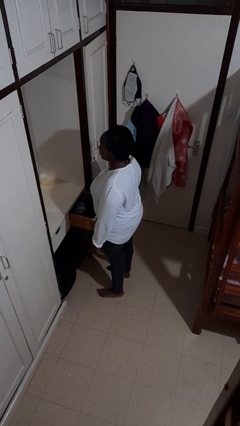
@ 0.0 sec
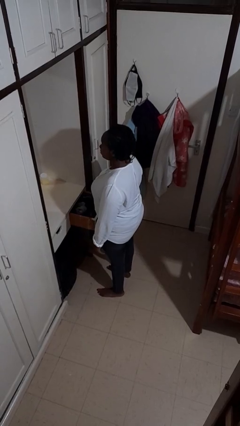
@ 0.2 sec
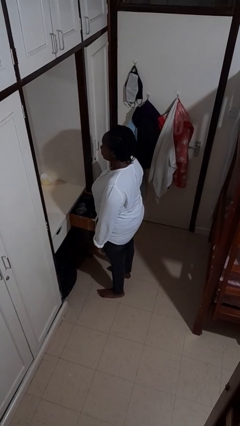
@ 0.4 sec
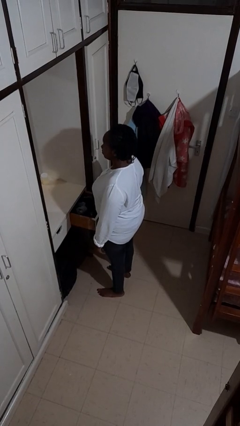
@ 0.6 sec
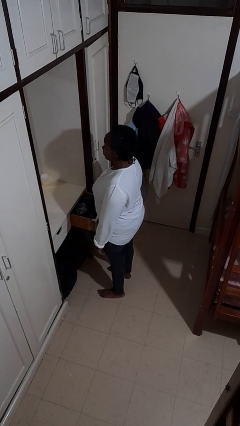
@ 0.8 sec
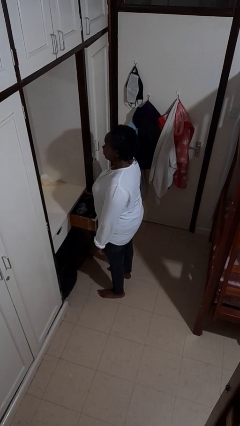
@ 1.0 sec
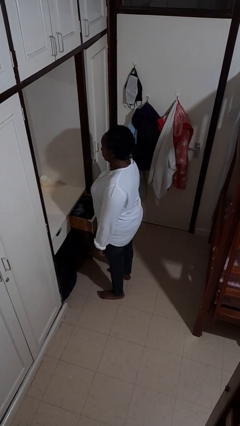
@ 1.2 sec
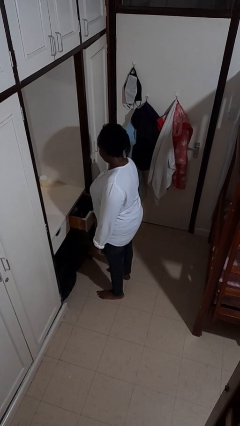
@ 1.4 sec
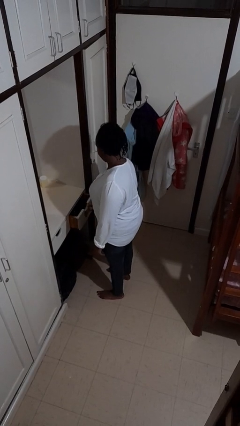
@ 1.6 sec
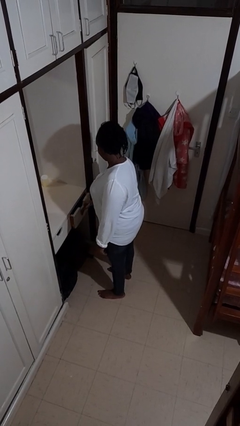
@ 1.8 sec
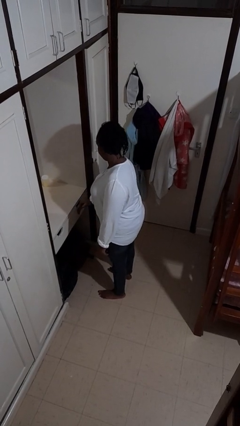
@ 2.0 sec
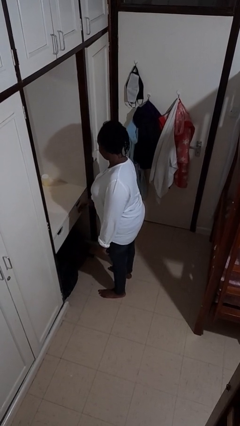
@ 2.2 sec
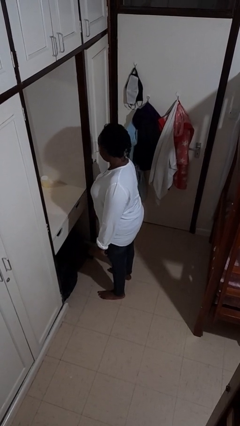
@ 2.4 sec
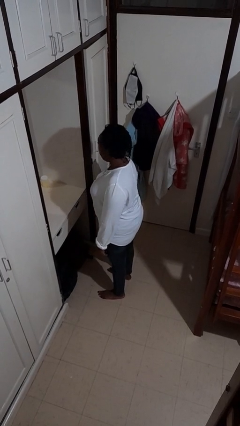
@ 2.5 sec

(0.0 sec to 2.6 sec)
person closes dresser drawer

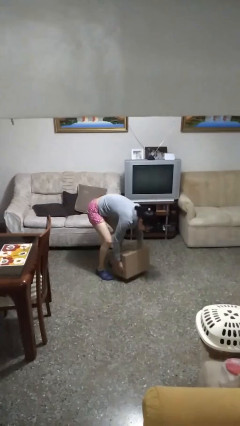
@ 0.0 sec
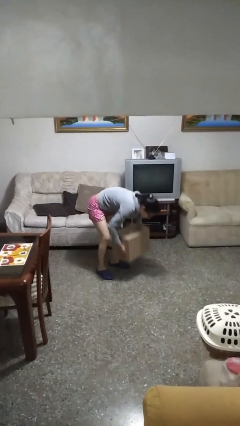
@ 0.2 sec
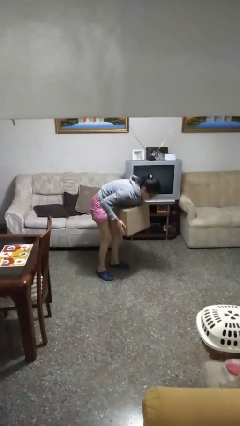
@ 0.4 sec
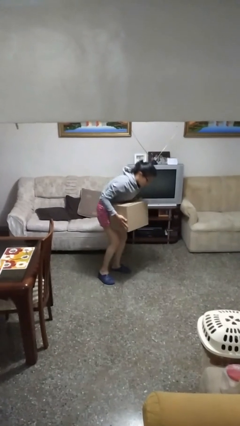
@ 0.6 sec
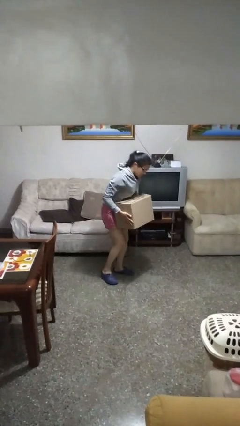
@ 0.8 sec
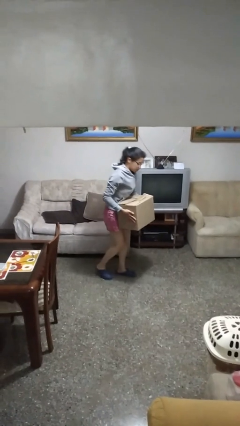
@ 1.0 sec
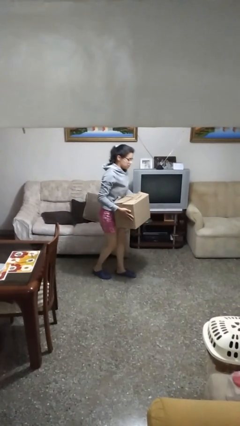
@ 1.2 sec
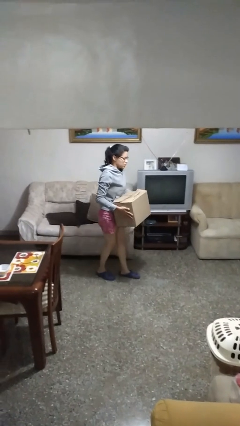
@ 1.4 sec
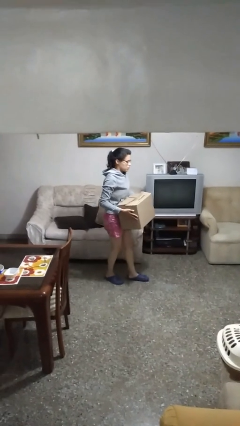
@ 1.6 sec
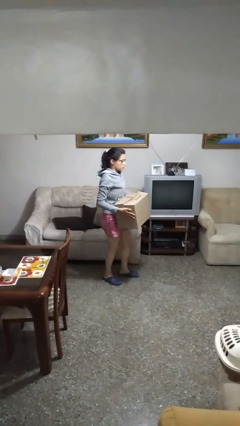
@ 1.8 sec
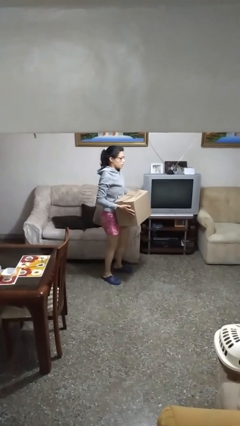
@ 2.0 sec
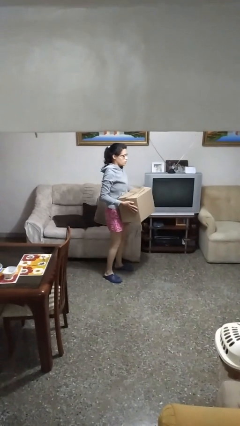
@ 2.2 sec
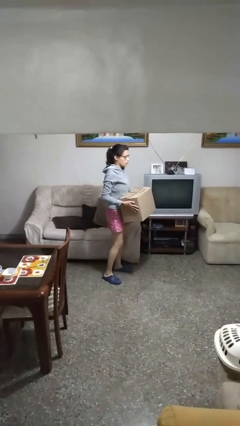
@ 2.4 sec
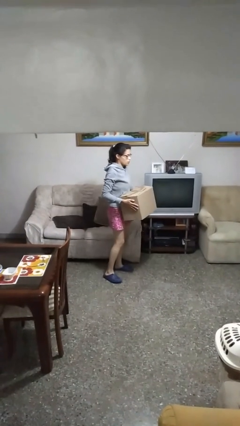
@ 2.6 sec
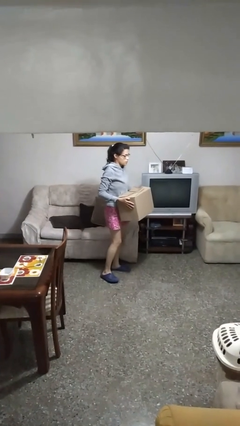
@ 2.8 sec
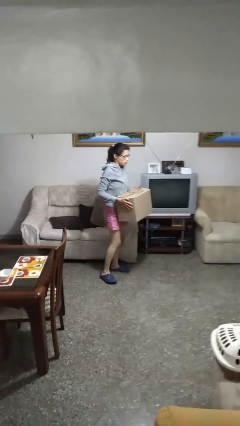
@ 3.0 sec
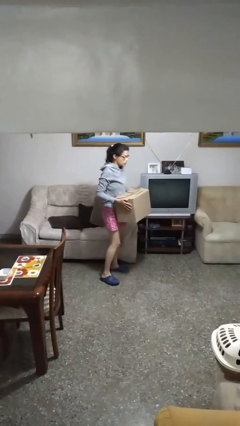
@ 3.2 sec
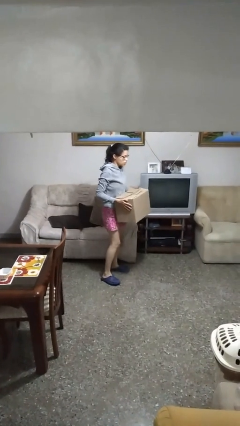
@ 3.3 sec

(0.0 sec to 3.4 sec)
person picks up object from floor

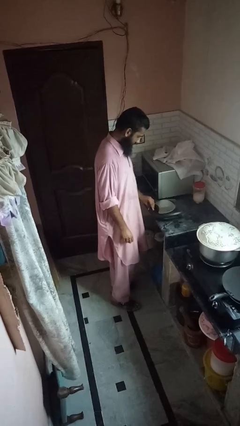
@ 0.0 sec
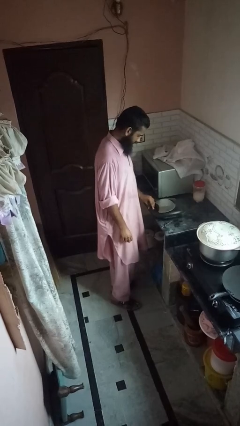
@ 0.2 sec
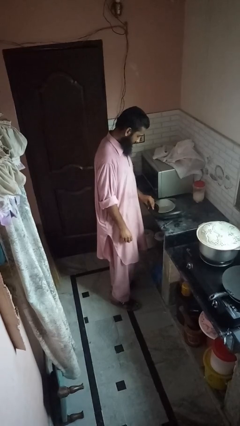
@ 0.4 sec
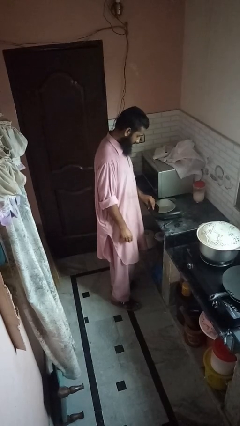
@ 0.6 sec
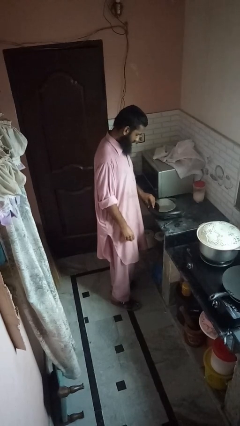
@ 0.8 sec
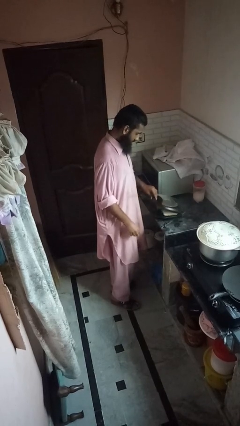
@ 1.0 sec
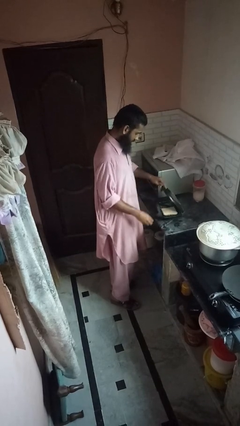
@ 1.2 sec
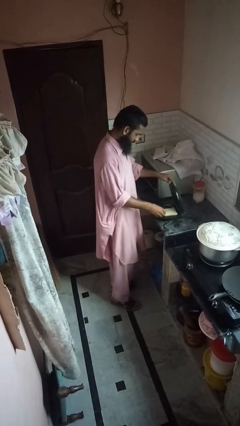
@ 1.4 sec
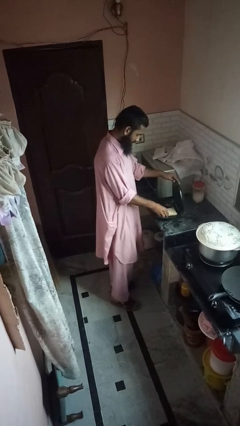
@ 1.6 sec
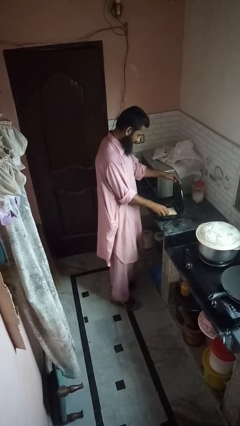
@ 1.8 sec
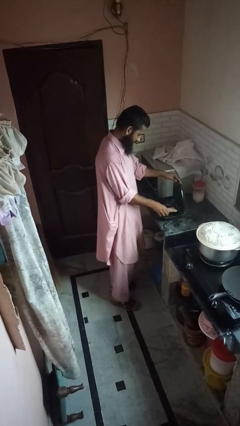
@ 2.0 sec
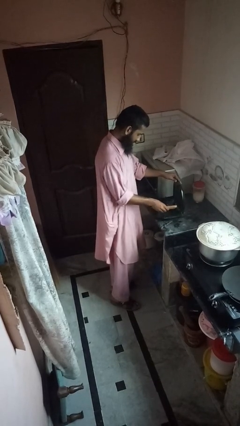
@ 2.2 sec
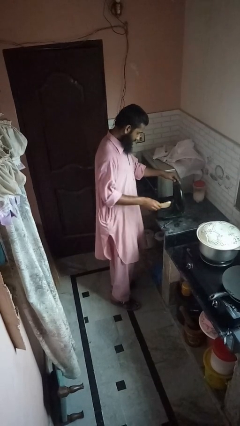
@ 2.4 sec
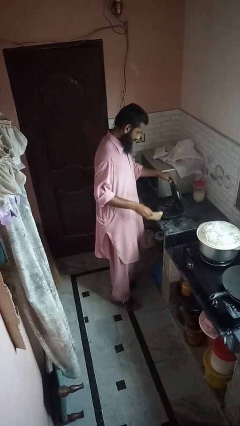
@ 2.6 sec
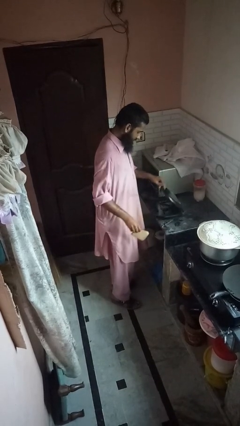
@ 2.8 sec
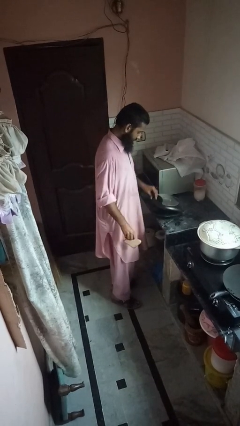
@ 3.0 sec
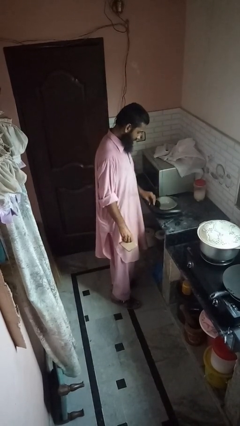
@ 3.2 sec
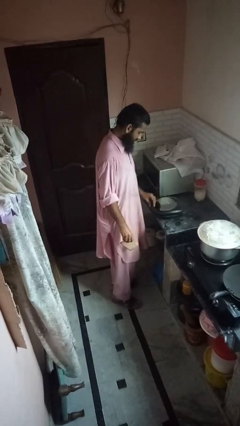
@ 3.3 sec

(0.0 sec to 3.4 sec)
person takes object from toaster

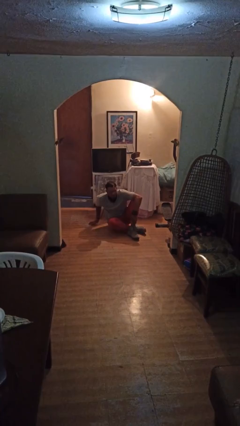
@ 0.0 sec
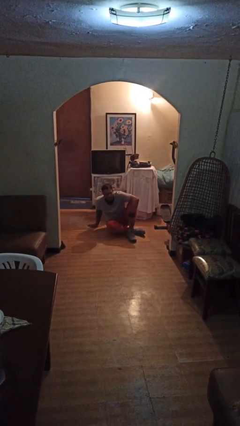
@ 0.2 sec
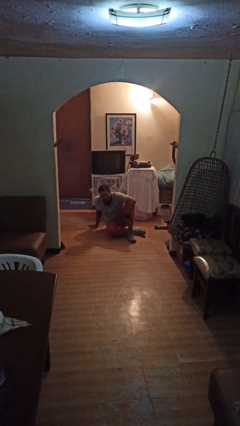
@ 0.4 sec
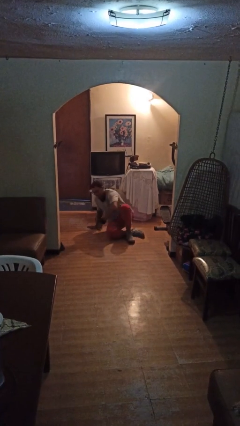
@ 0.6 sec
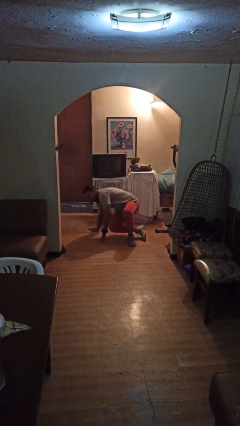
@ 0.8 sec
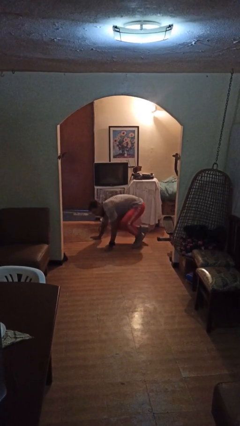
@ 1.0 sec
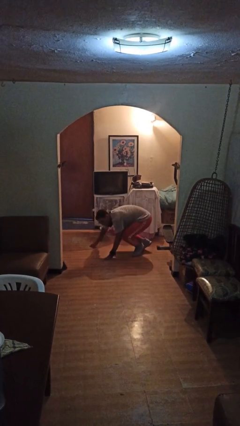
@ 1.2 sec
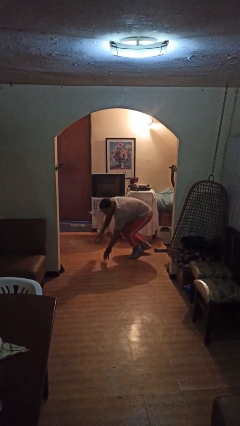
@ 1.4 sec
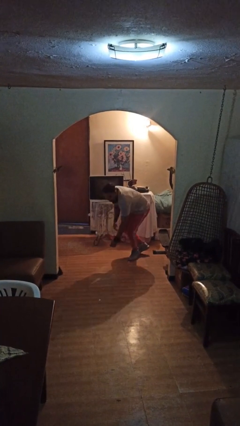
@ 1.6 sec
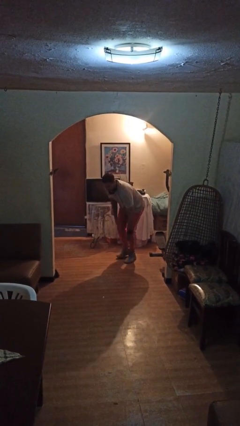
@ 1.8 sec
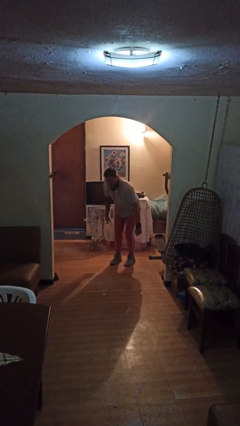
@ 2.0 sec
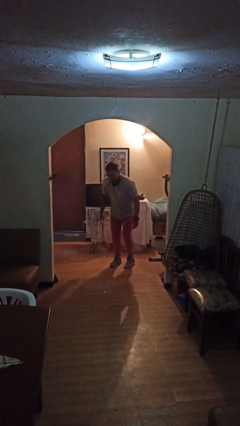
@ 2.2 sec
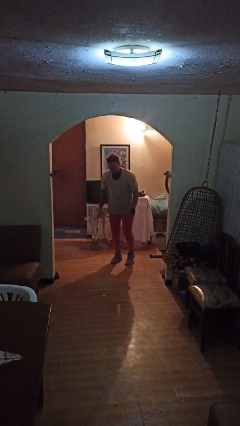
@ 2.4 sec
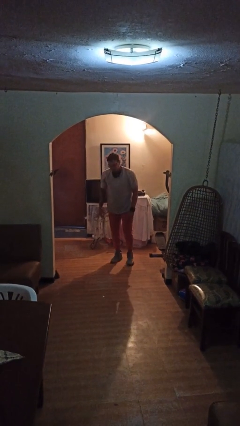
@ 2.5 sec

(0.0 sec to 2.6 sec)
person stands up

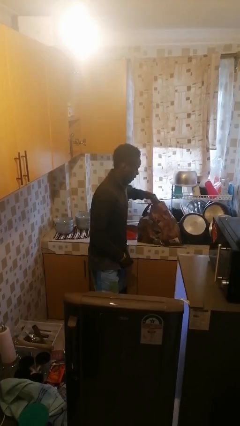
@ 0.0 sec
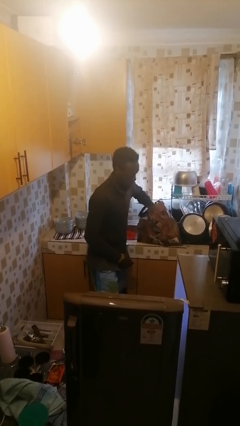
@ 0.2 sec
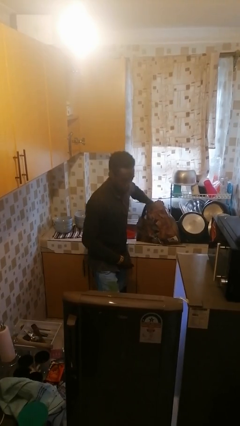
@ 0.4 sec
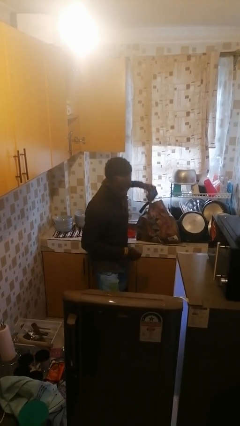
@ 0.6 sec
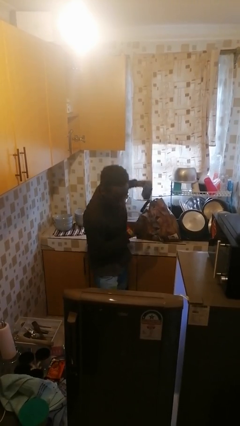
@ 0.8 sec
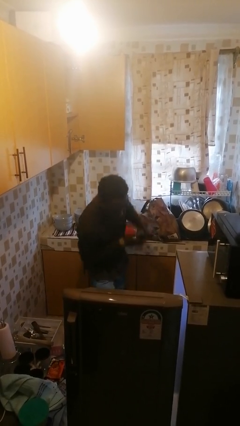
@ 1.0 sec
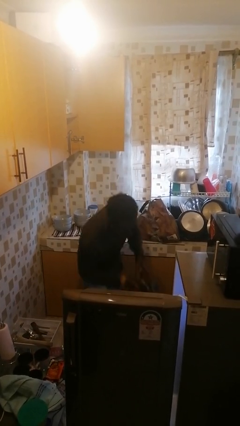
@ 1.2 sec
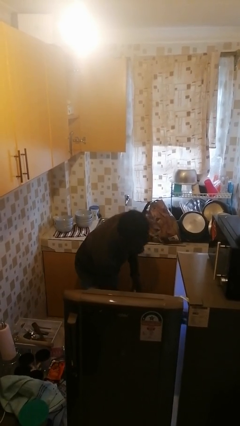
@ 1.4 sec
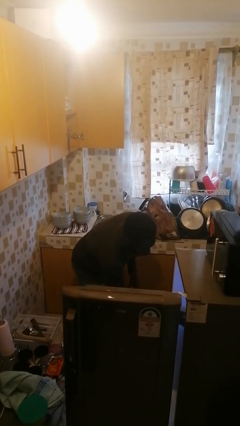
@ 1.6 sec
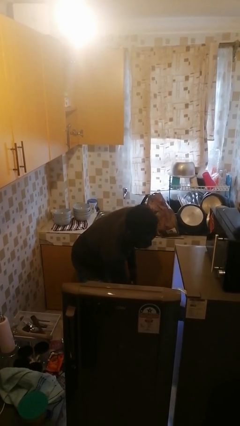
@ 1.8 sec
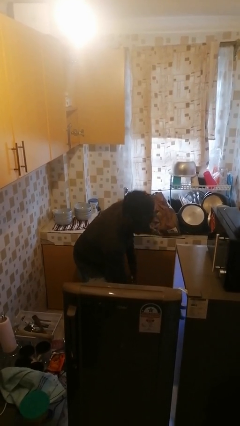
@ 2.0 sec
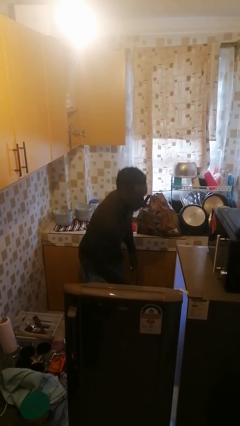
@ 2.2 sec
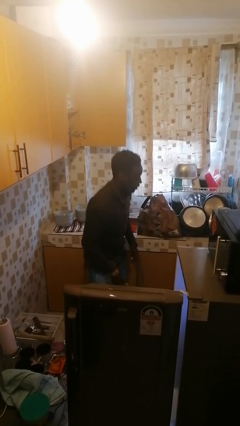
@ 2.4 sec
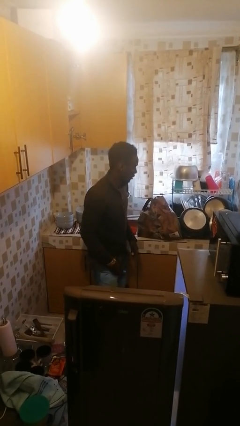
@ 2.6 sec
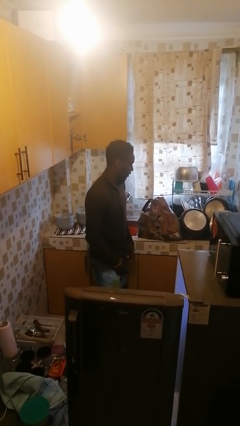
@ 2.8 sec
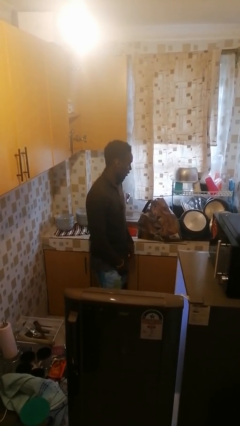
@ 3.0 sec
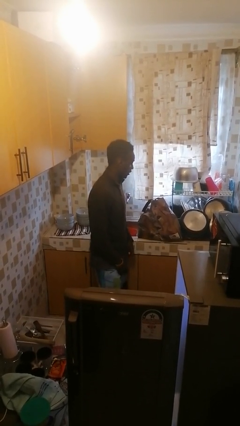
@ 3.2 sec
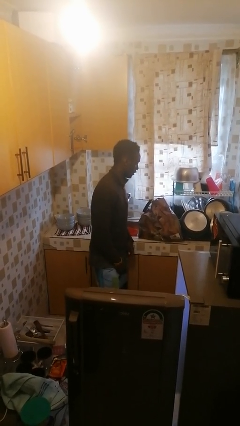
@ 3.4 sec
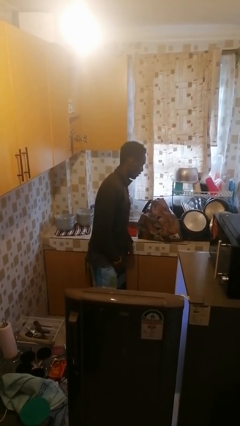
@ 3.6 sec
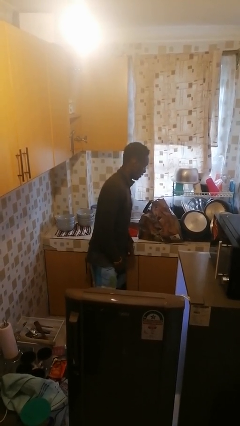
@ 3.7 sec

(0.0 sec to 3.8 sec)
person loads groceries into refrigerator

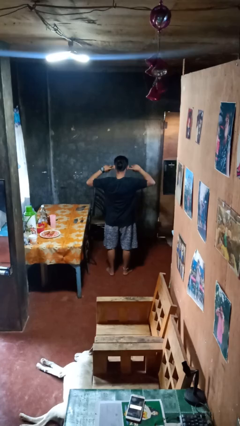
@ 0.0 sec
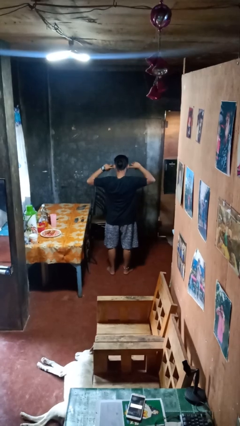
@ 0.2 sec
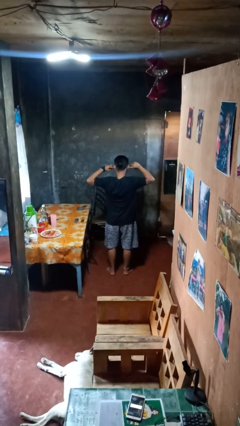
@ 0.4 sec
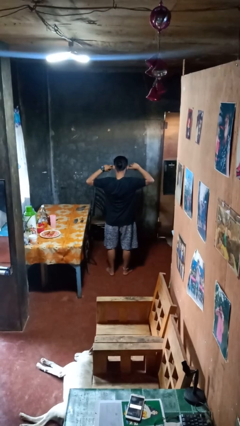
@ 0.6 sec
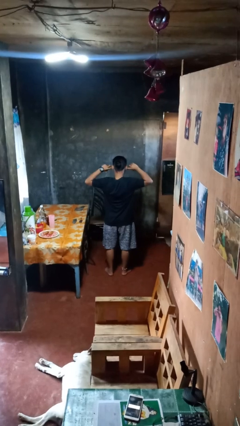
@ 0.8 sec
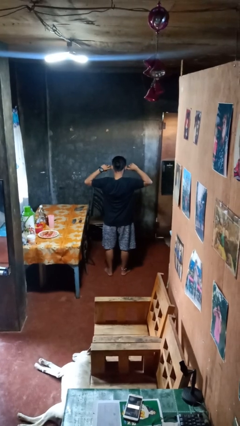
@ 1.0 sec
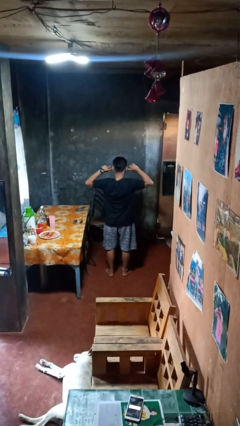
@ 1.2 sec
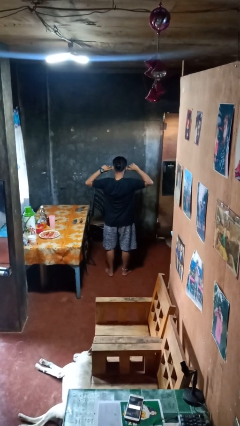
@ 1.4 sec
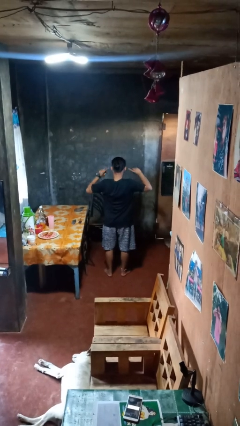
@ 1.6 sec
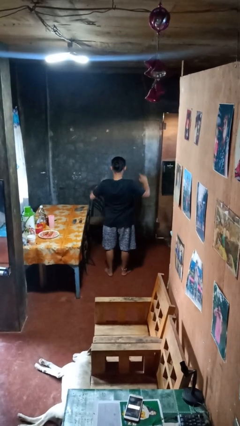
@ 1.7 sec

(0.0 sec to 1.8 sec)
person puts fingers in ear
